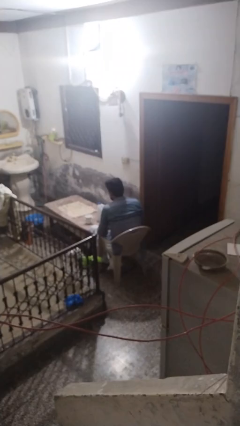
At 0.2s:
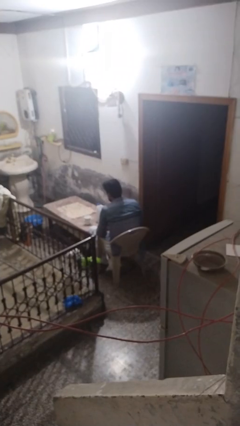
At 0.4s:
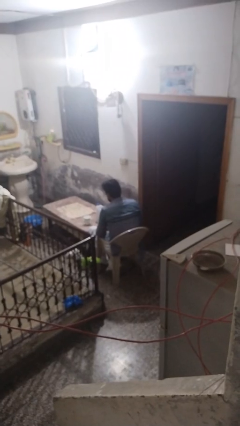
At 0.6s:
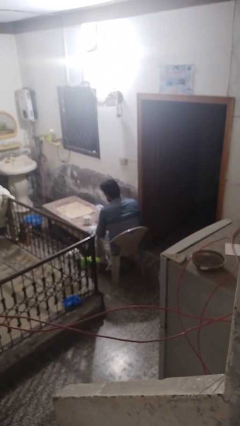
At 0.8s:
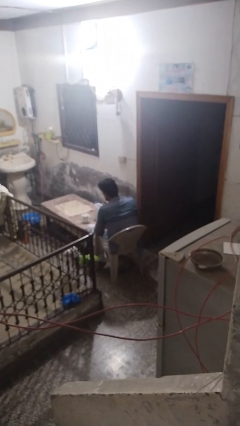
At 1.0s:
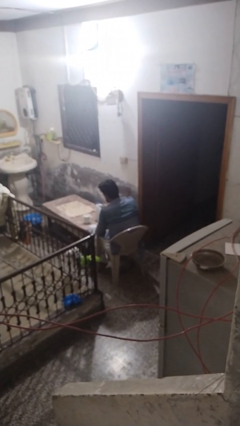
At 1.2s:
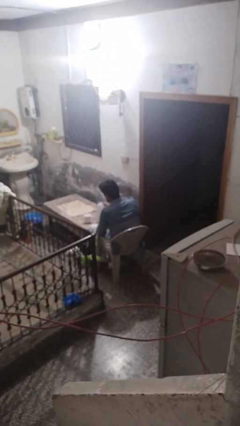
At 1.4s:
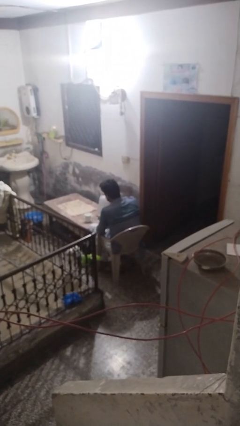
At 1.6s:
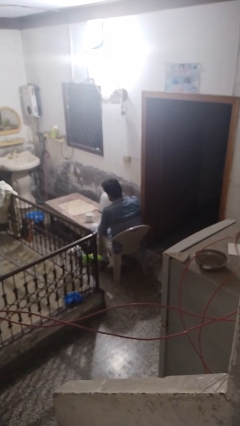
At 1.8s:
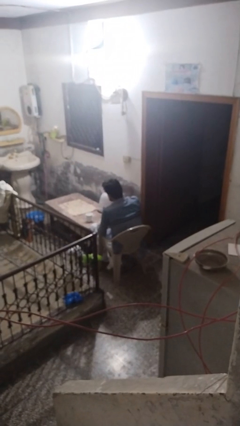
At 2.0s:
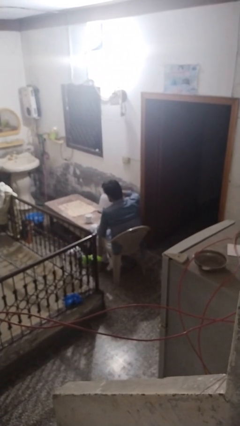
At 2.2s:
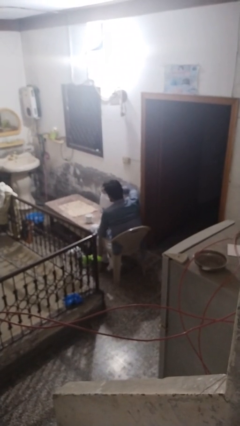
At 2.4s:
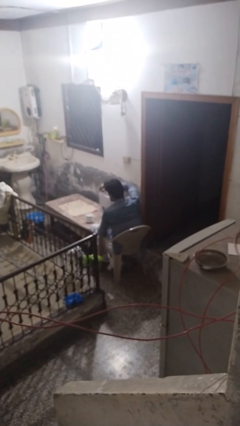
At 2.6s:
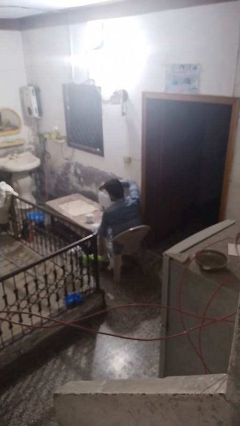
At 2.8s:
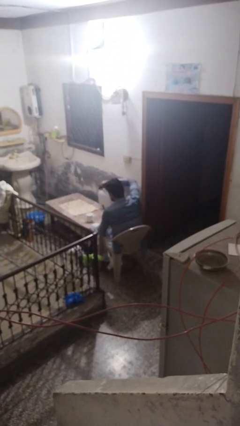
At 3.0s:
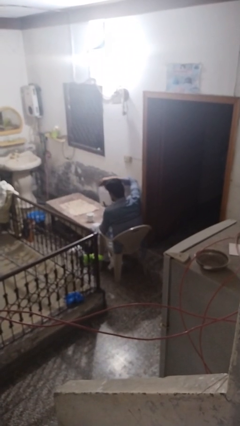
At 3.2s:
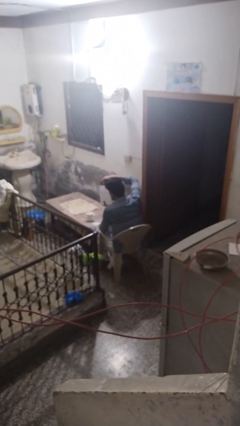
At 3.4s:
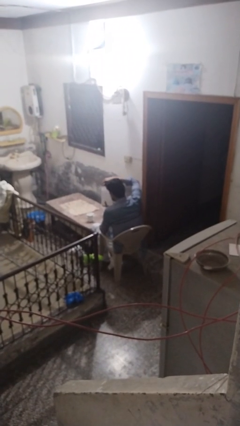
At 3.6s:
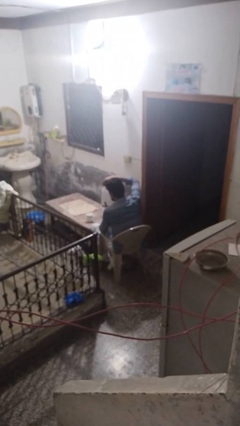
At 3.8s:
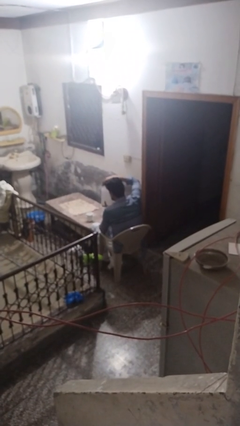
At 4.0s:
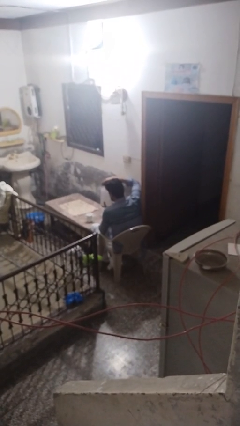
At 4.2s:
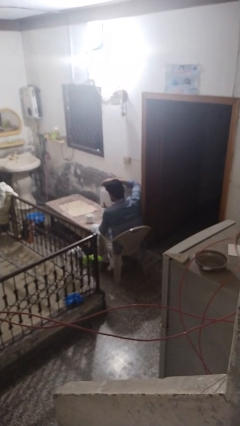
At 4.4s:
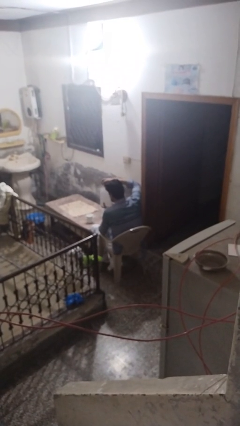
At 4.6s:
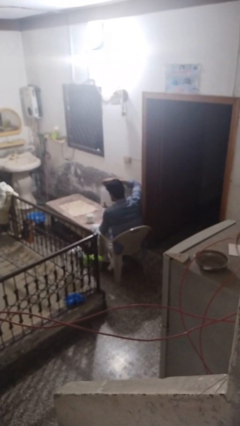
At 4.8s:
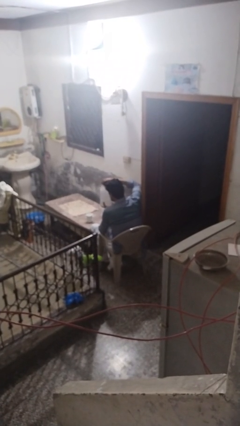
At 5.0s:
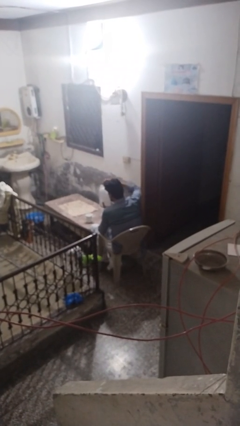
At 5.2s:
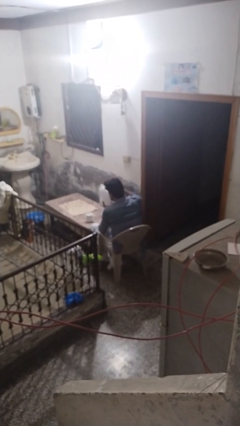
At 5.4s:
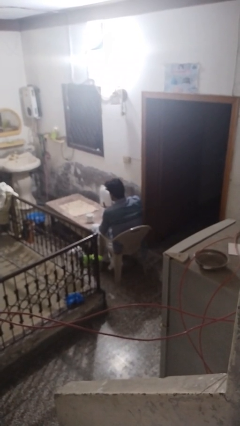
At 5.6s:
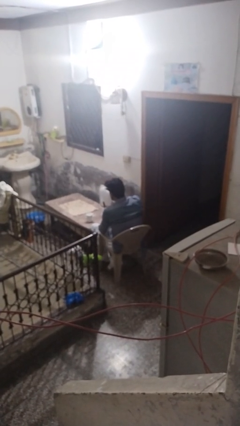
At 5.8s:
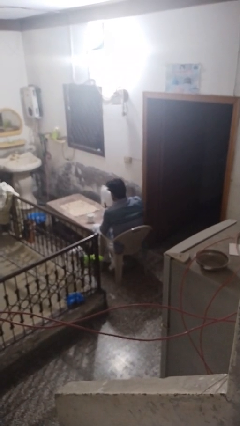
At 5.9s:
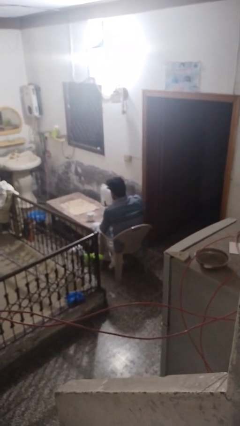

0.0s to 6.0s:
person unscrews lid from bottle

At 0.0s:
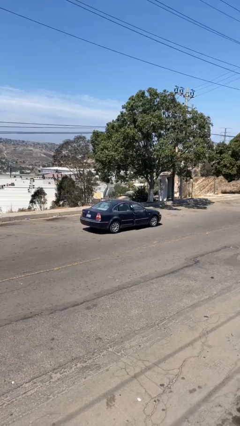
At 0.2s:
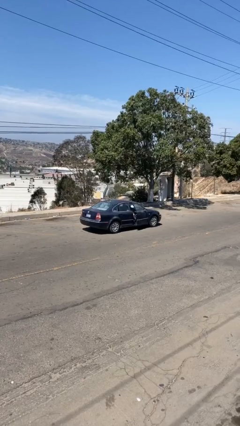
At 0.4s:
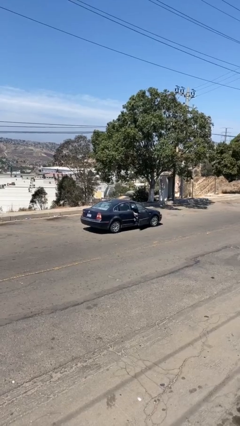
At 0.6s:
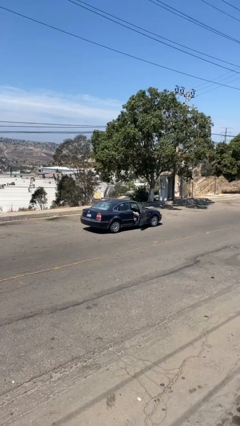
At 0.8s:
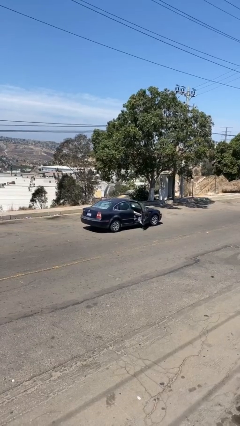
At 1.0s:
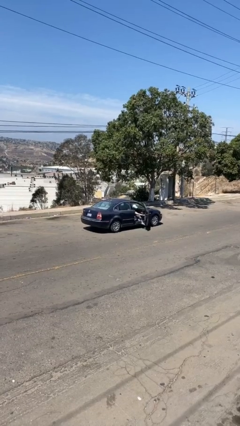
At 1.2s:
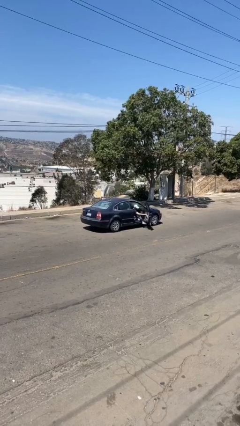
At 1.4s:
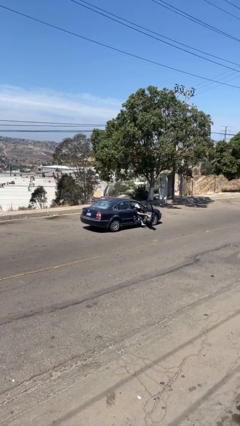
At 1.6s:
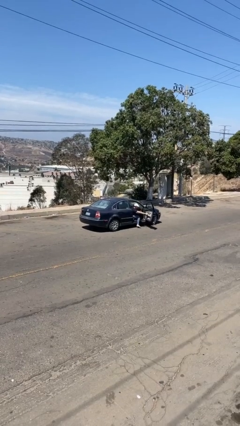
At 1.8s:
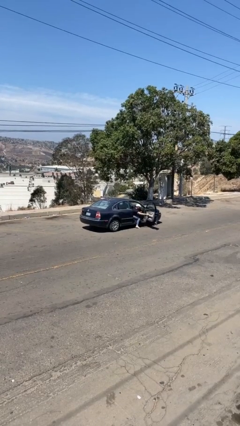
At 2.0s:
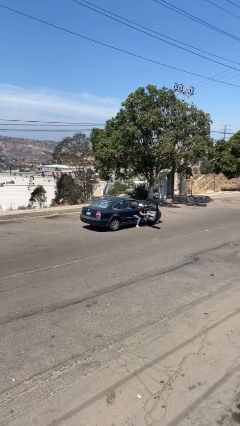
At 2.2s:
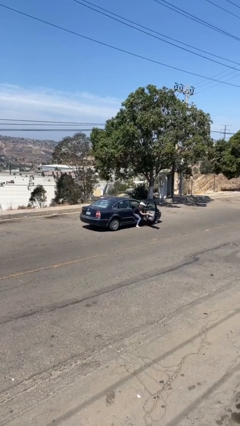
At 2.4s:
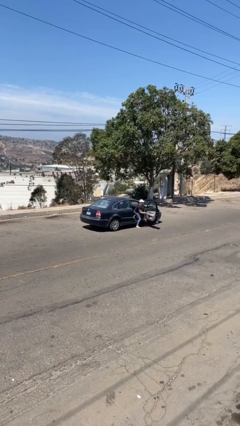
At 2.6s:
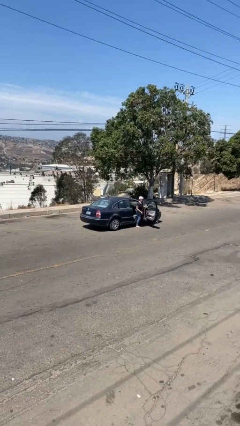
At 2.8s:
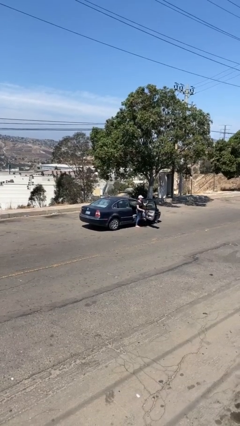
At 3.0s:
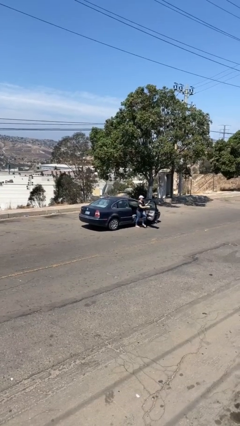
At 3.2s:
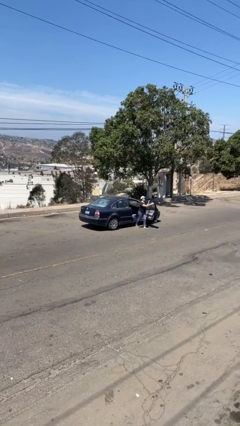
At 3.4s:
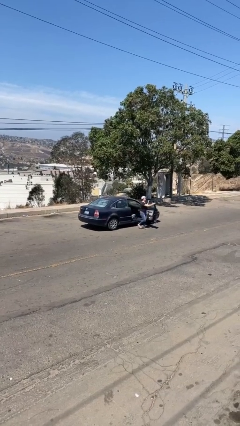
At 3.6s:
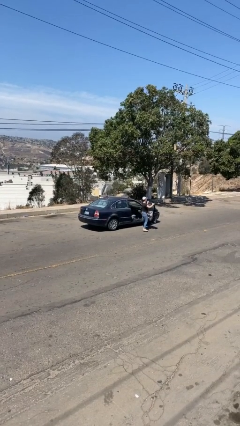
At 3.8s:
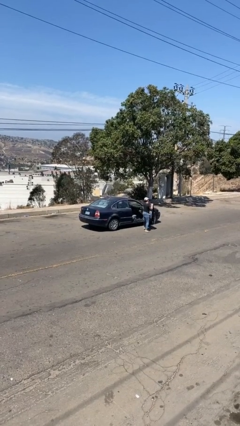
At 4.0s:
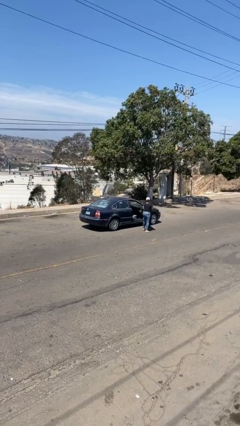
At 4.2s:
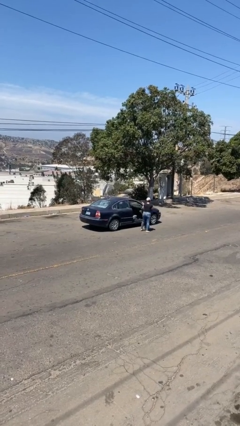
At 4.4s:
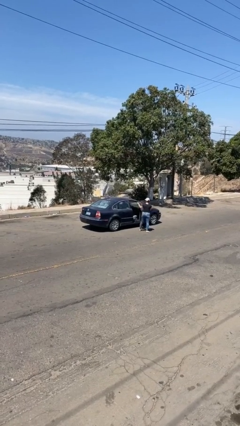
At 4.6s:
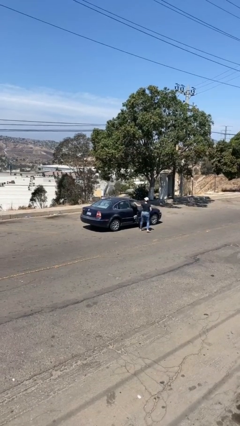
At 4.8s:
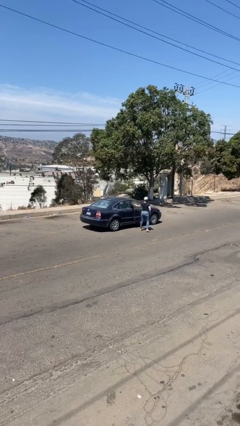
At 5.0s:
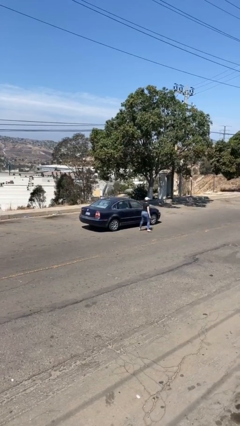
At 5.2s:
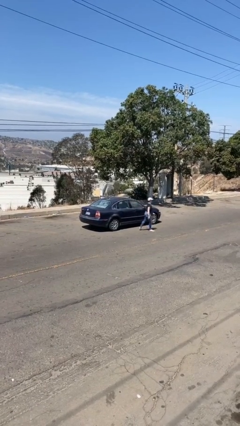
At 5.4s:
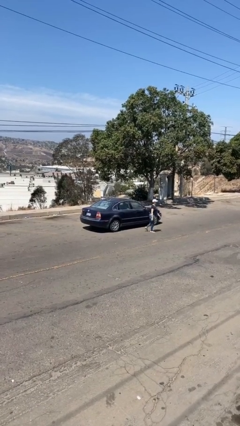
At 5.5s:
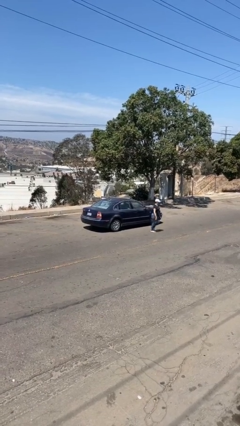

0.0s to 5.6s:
car drops off person

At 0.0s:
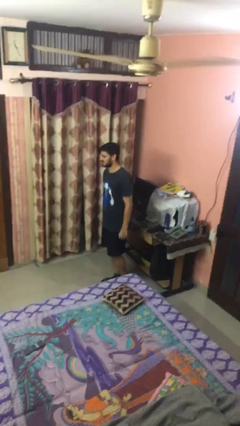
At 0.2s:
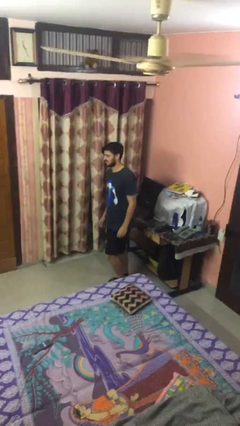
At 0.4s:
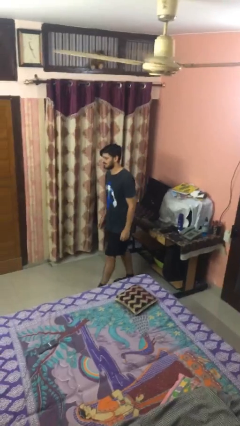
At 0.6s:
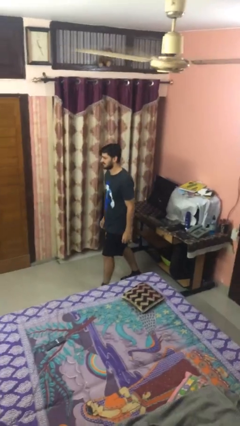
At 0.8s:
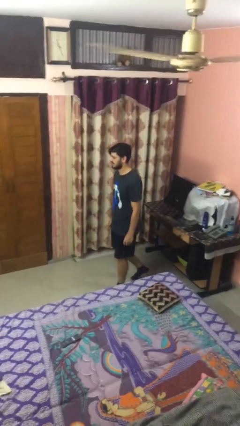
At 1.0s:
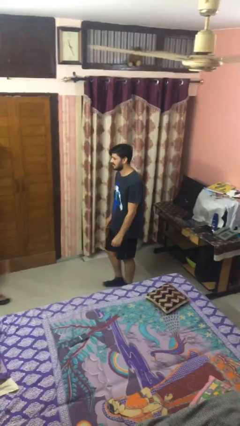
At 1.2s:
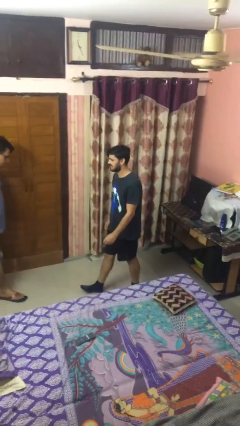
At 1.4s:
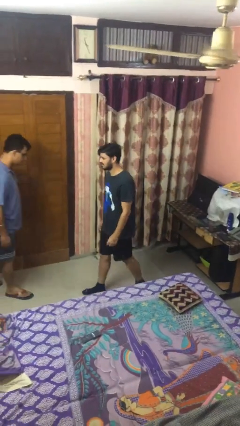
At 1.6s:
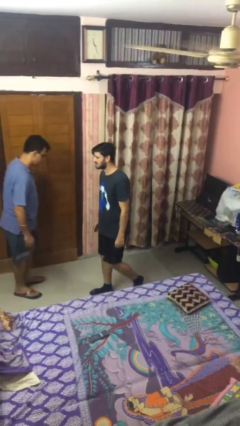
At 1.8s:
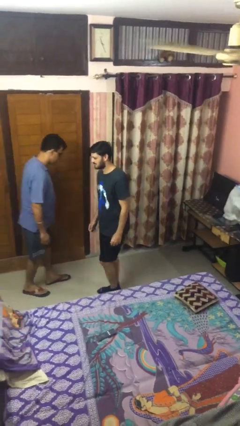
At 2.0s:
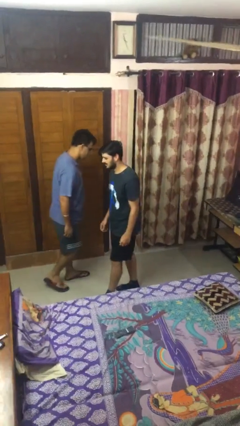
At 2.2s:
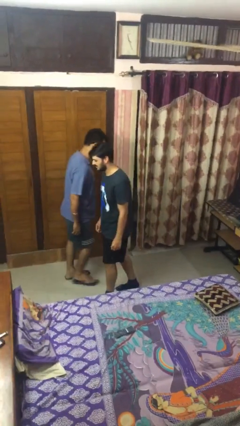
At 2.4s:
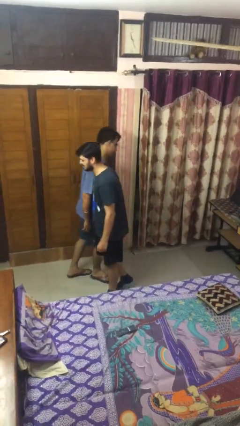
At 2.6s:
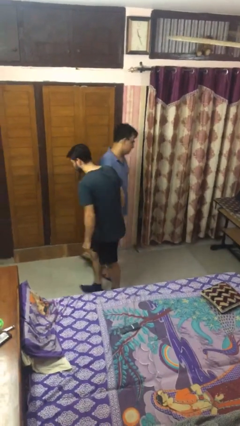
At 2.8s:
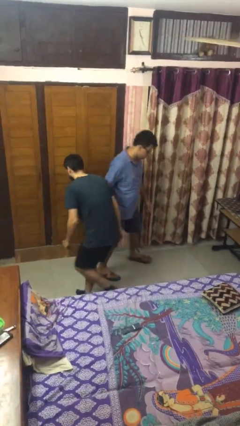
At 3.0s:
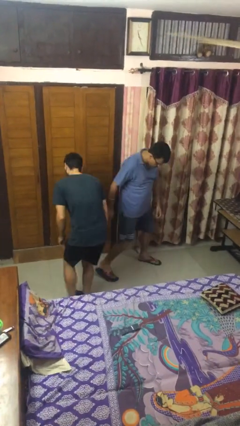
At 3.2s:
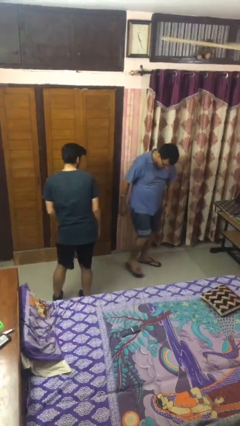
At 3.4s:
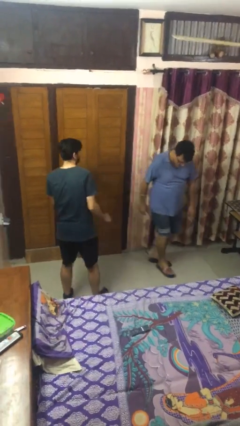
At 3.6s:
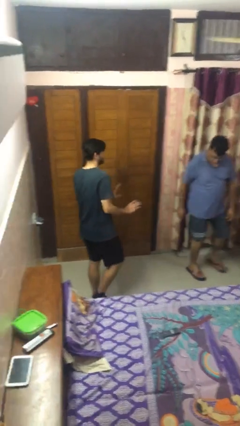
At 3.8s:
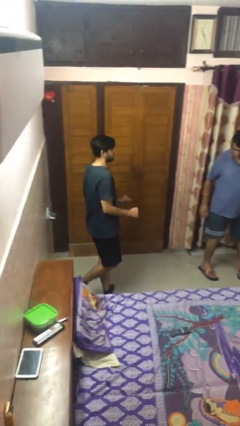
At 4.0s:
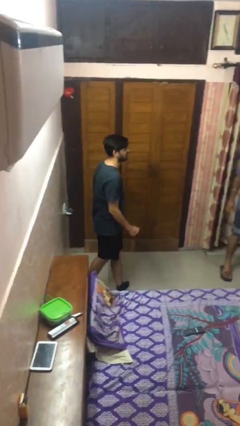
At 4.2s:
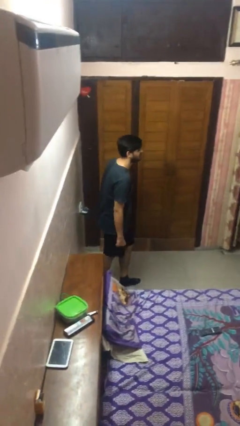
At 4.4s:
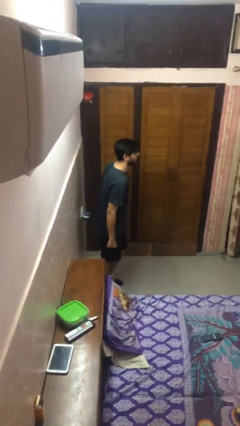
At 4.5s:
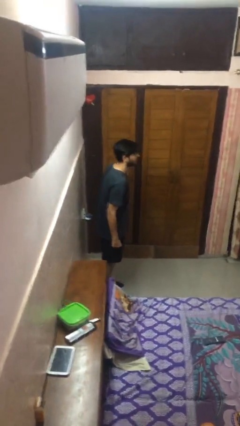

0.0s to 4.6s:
person bumps into person

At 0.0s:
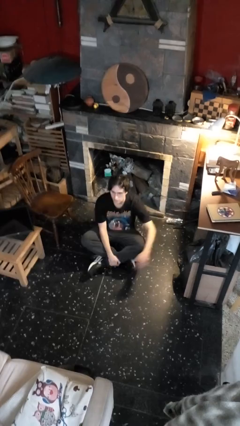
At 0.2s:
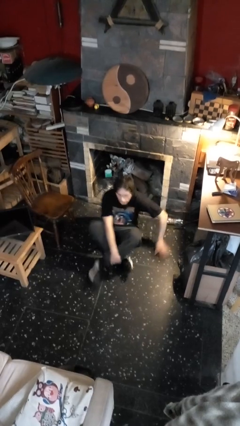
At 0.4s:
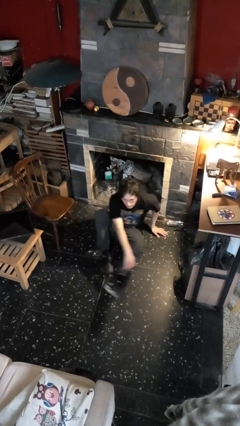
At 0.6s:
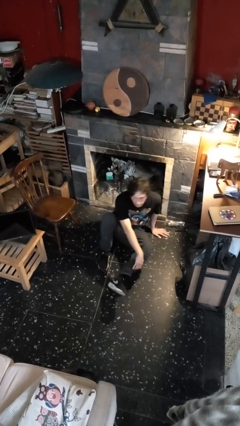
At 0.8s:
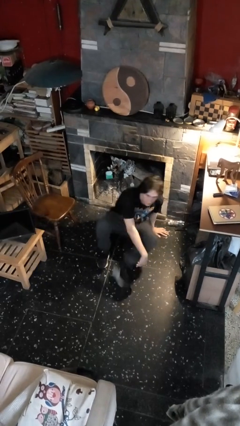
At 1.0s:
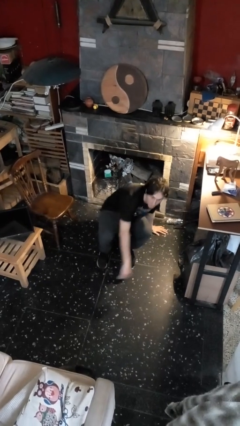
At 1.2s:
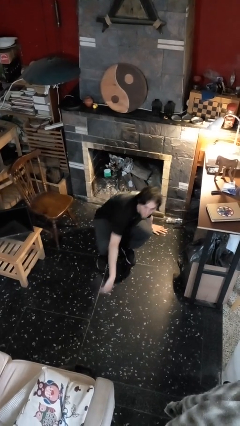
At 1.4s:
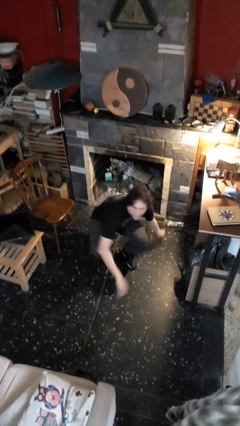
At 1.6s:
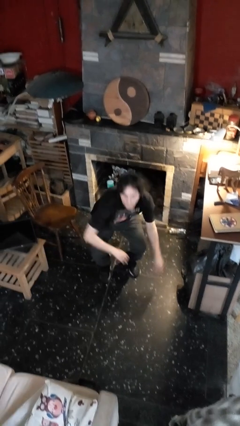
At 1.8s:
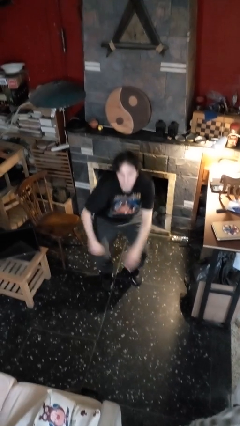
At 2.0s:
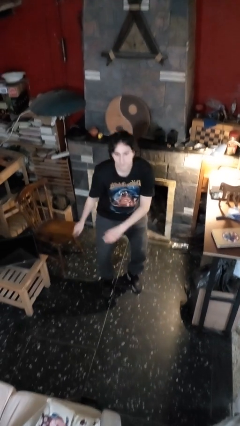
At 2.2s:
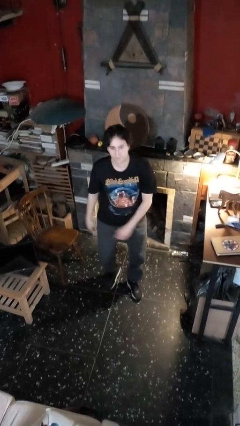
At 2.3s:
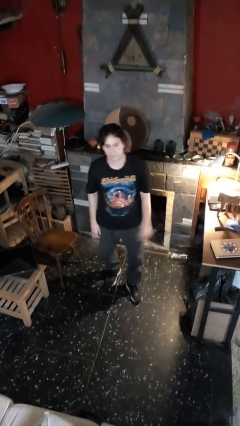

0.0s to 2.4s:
person stands up from floor
